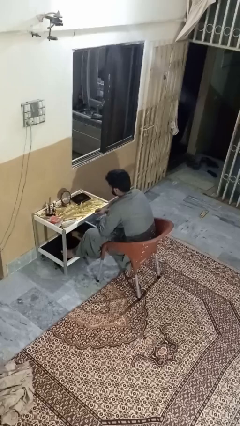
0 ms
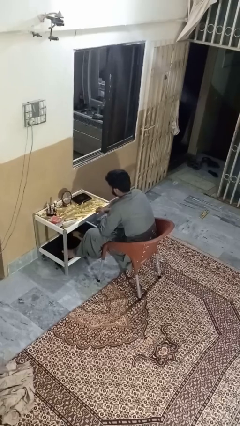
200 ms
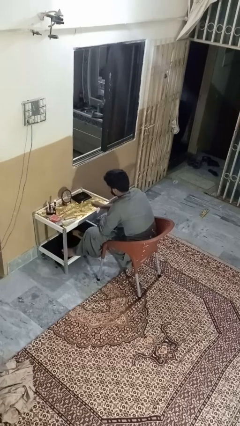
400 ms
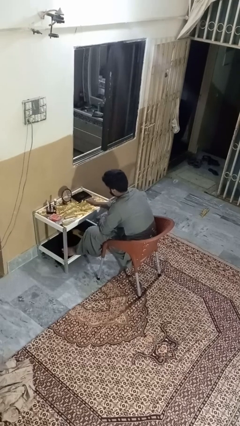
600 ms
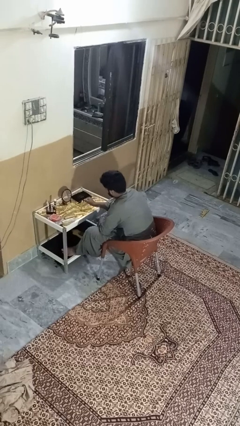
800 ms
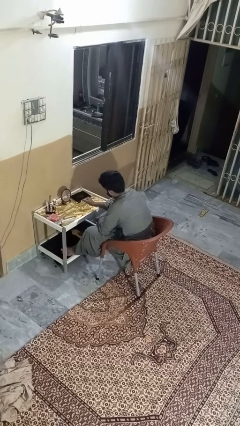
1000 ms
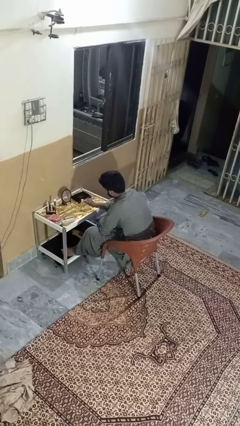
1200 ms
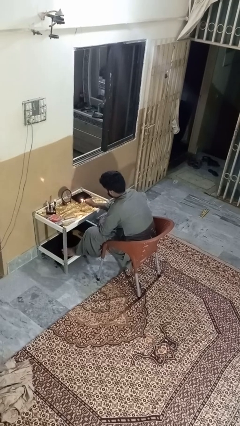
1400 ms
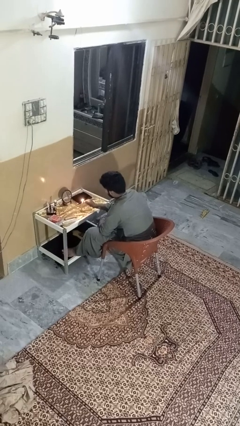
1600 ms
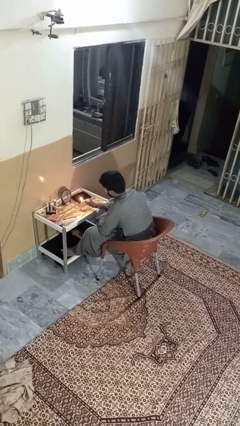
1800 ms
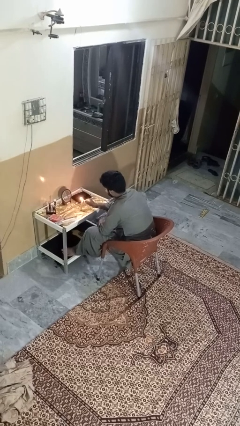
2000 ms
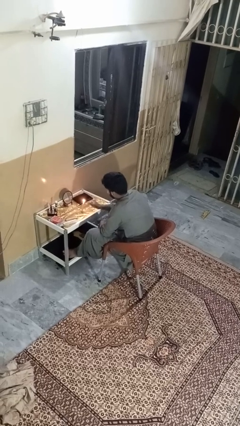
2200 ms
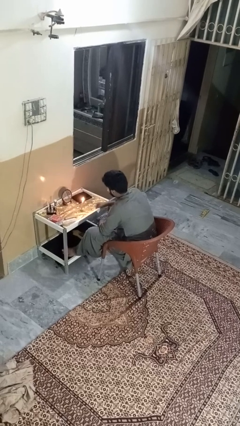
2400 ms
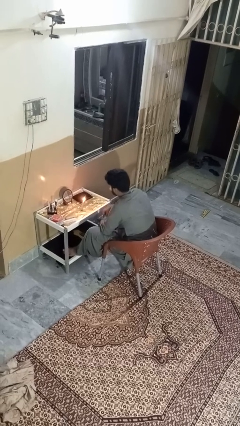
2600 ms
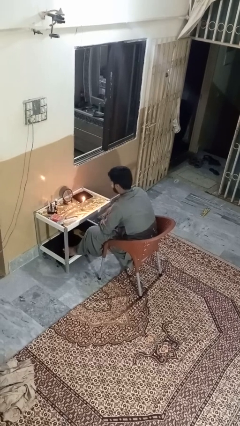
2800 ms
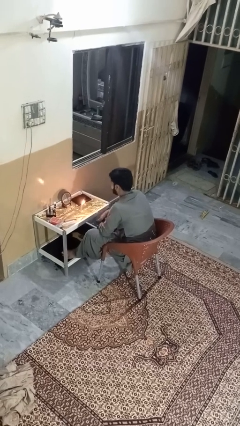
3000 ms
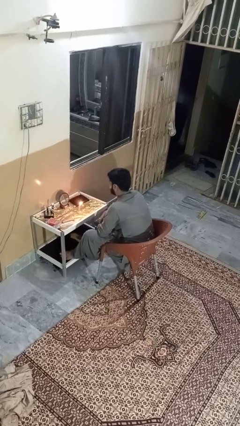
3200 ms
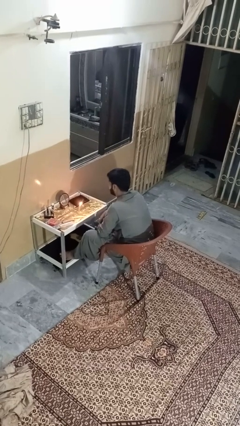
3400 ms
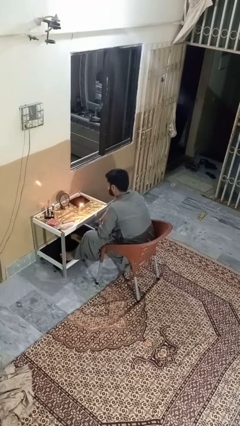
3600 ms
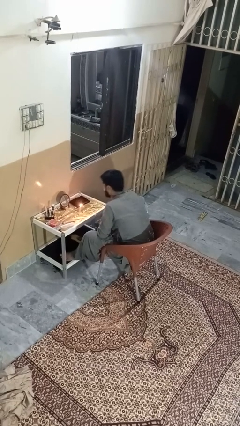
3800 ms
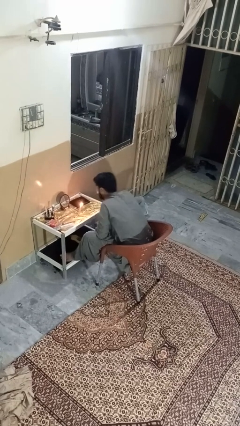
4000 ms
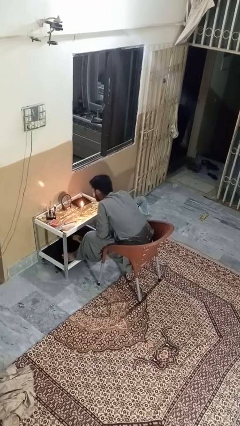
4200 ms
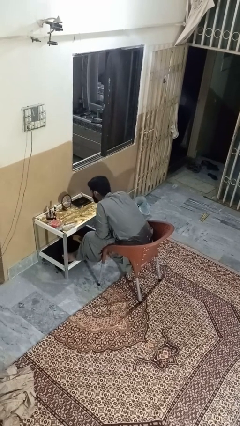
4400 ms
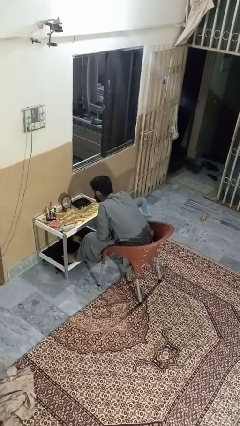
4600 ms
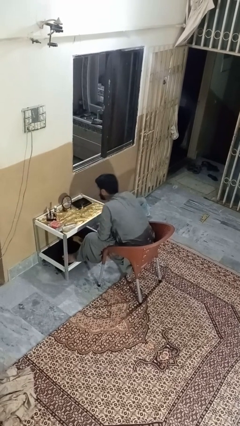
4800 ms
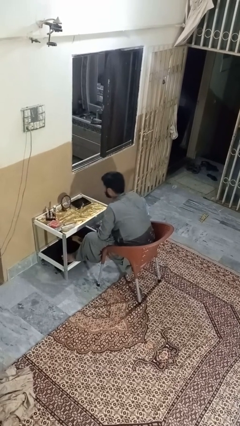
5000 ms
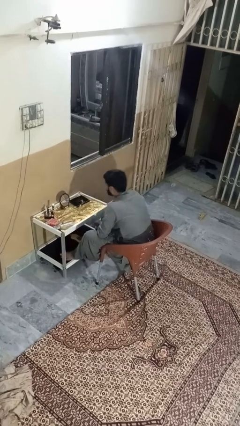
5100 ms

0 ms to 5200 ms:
person lights candle

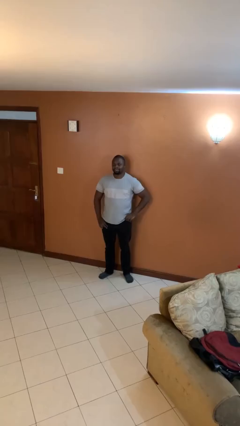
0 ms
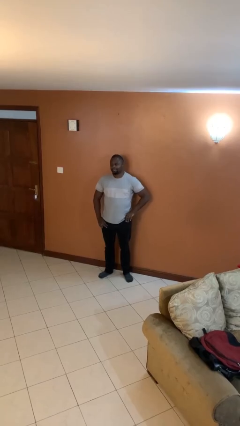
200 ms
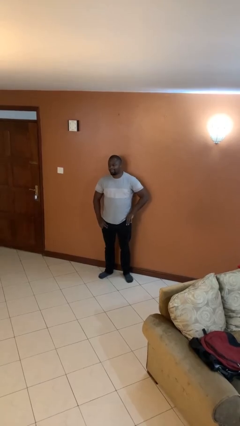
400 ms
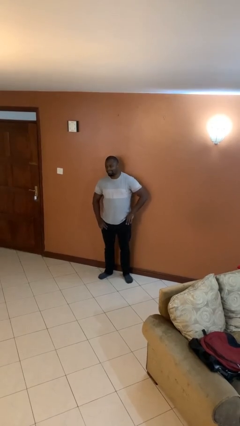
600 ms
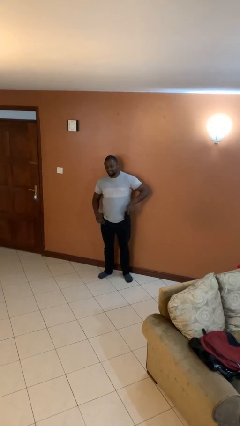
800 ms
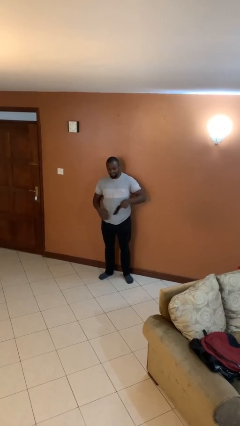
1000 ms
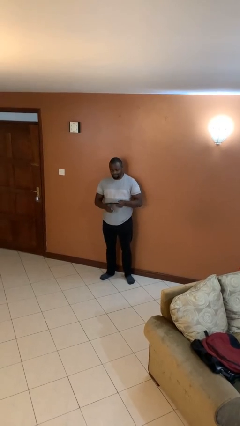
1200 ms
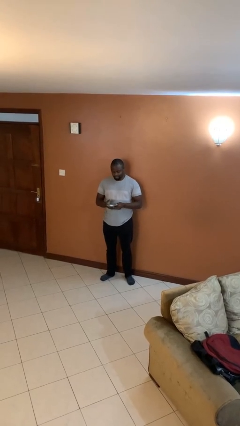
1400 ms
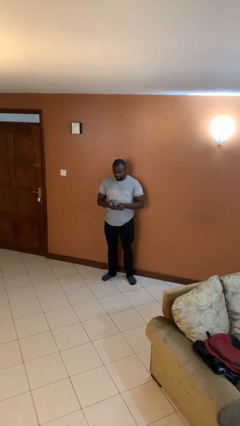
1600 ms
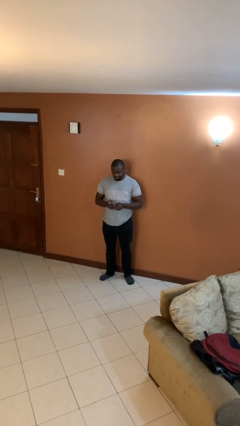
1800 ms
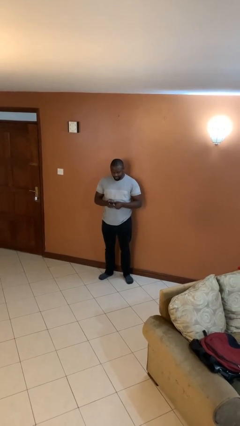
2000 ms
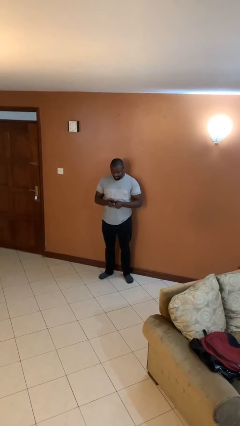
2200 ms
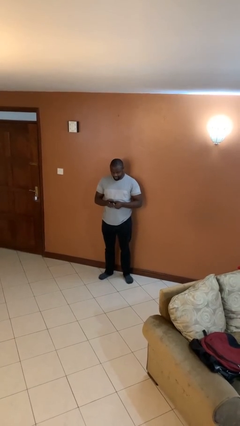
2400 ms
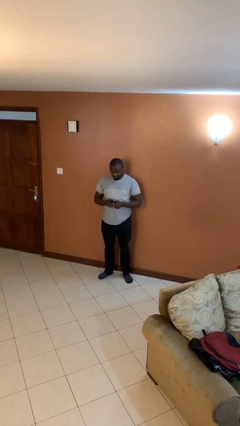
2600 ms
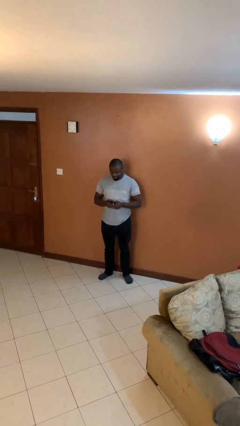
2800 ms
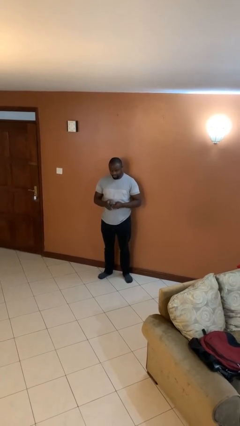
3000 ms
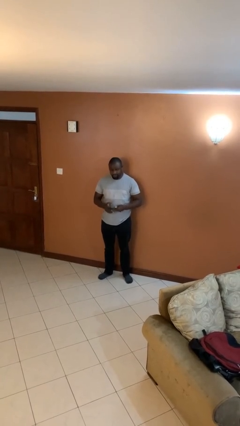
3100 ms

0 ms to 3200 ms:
person takes phone from pocket

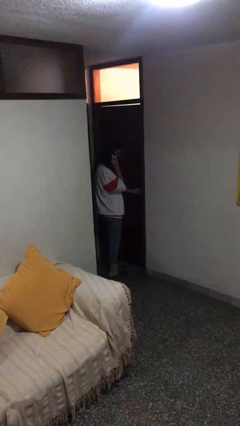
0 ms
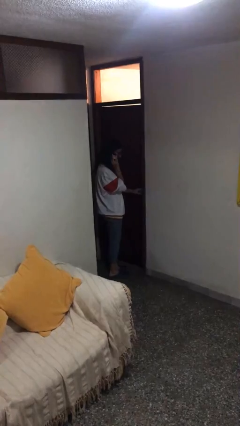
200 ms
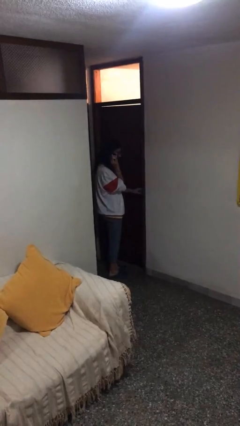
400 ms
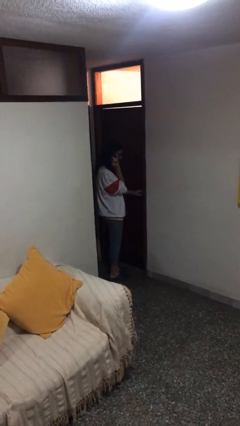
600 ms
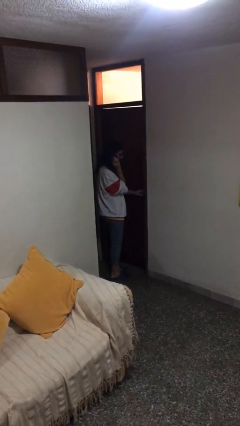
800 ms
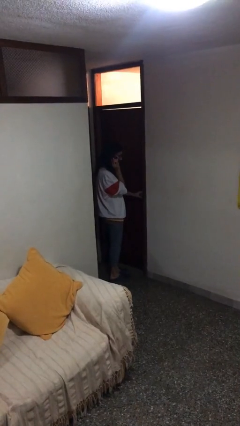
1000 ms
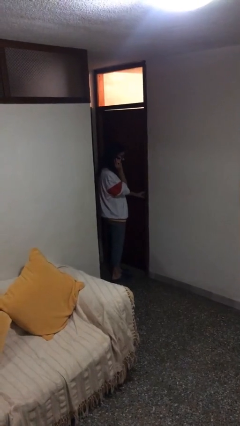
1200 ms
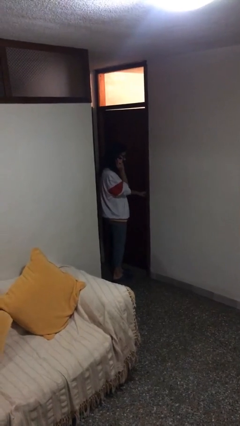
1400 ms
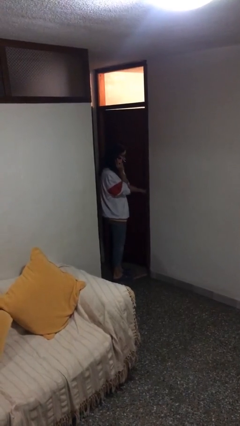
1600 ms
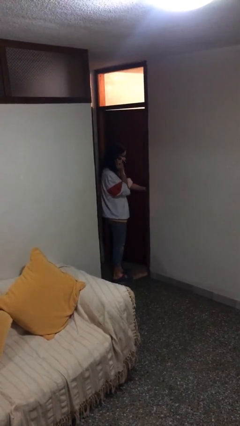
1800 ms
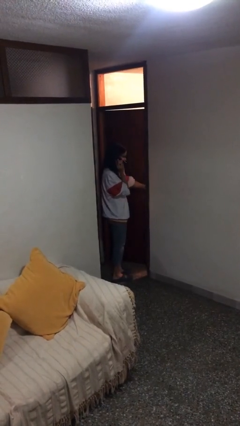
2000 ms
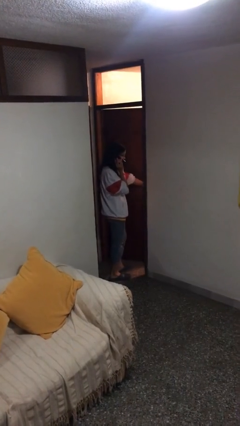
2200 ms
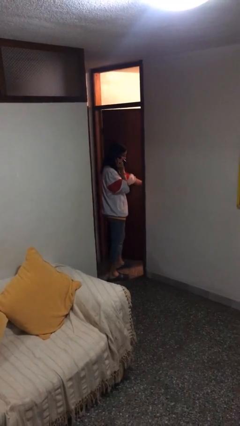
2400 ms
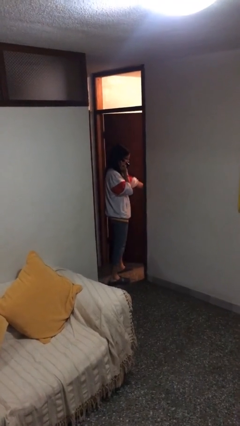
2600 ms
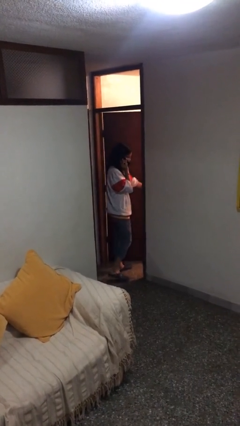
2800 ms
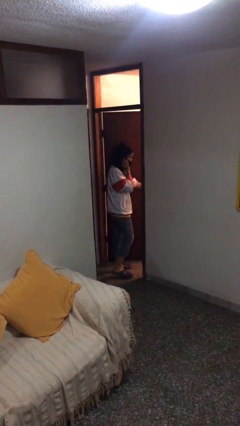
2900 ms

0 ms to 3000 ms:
person opens facility door

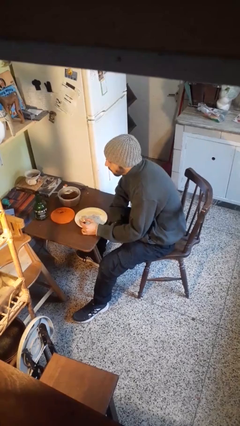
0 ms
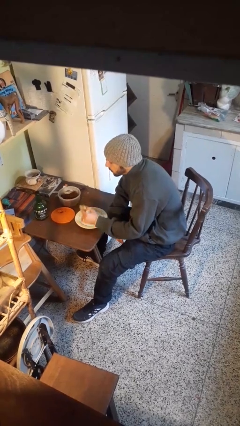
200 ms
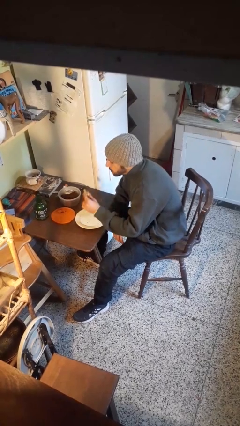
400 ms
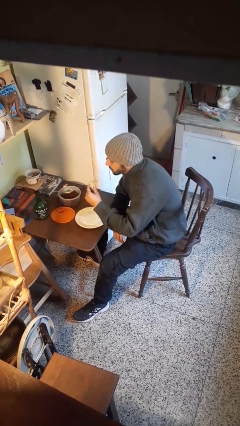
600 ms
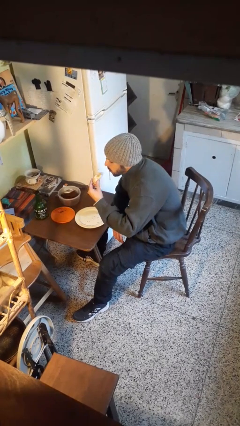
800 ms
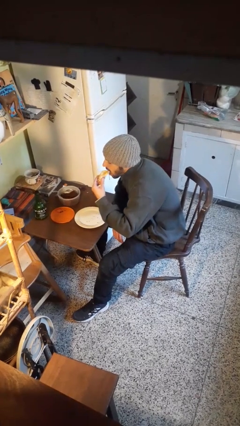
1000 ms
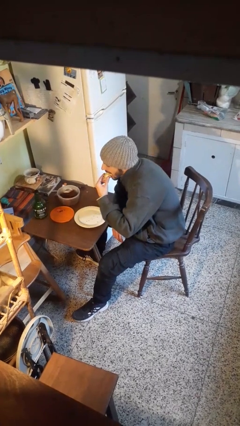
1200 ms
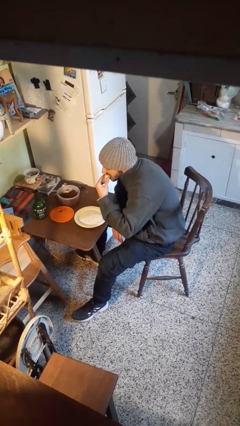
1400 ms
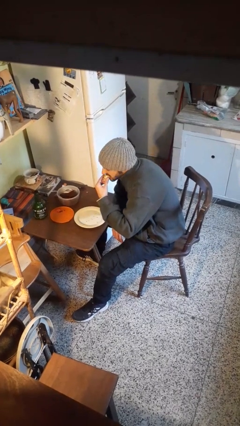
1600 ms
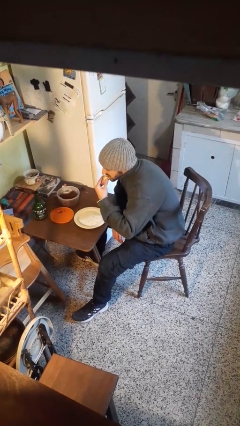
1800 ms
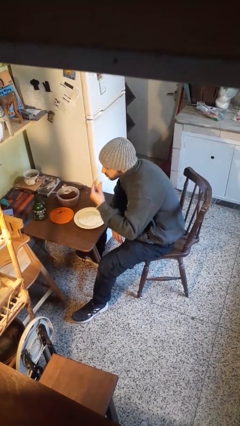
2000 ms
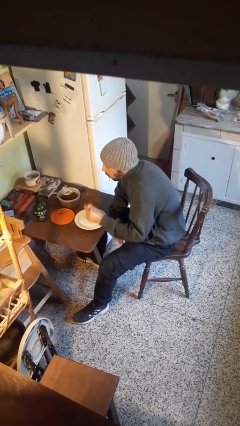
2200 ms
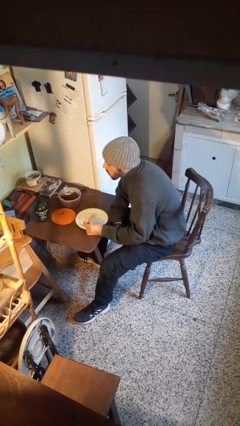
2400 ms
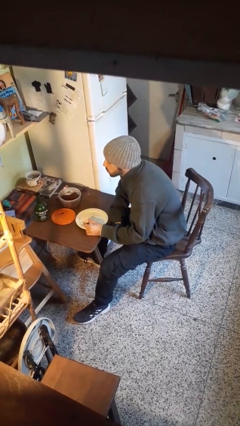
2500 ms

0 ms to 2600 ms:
person eats with hands

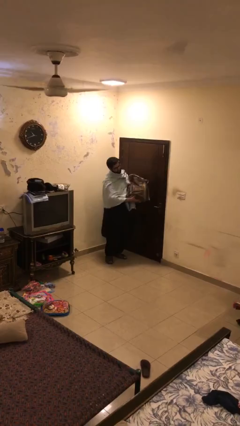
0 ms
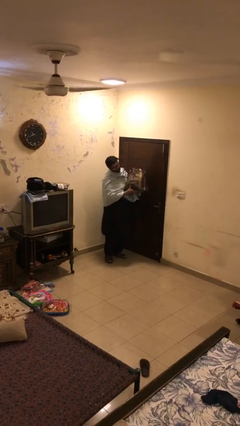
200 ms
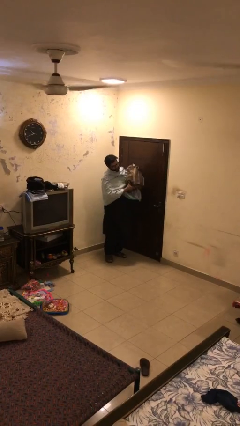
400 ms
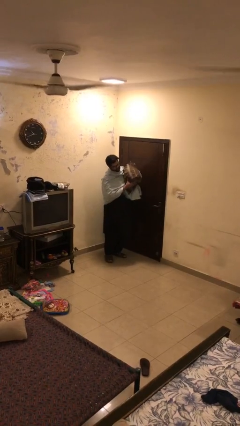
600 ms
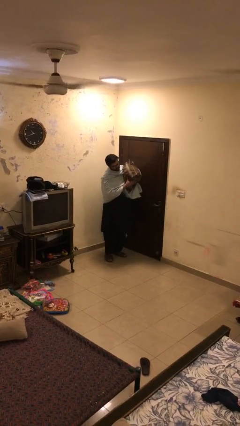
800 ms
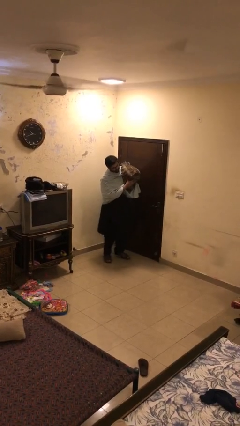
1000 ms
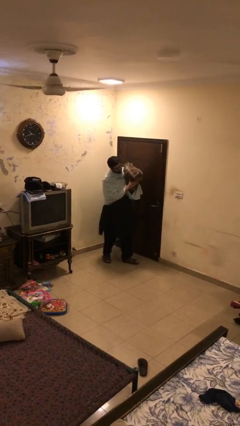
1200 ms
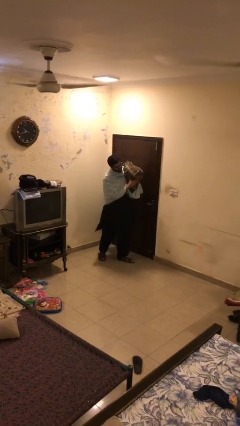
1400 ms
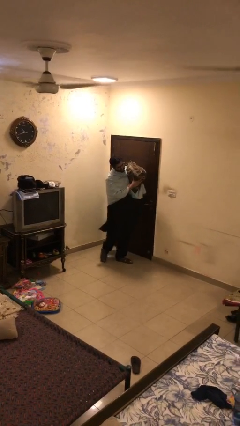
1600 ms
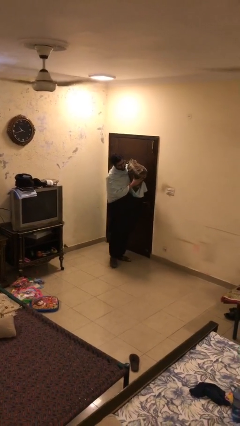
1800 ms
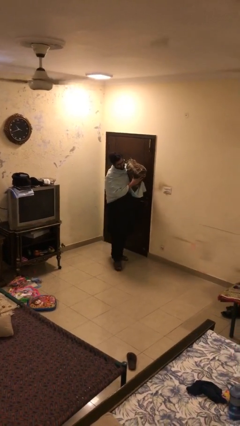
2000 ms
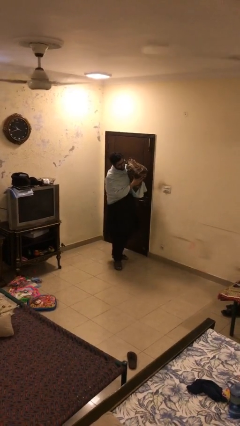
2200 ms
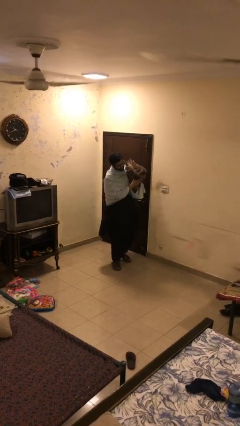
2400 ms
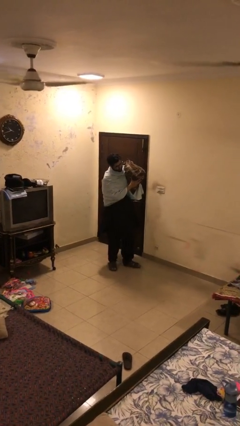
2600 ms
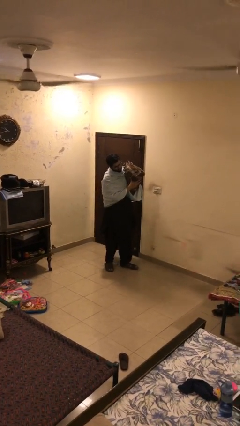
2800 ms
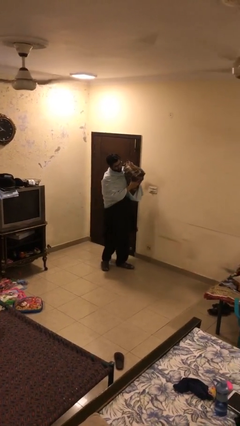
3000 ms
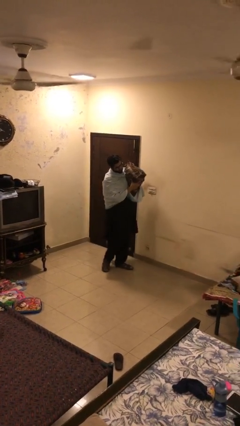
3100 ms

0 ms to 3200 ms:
person carries heavy object

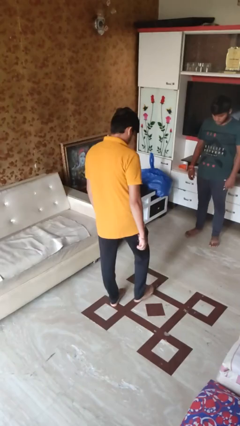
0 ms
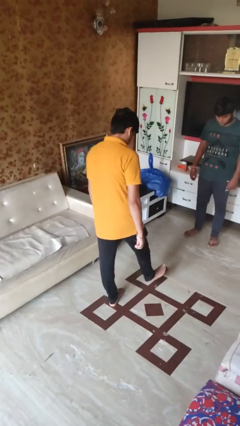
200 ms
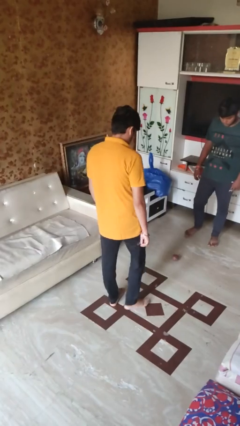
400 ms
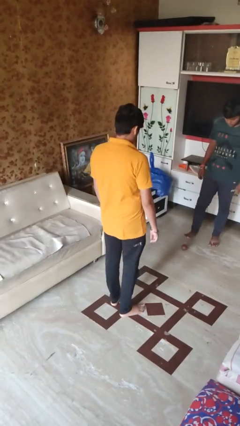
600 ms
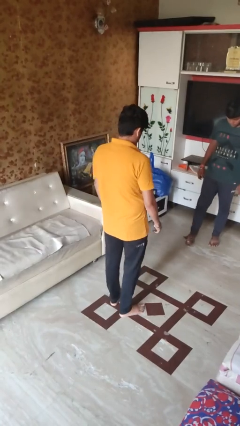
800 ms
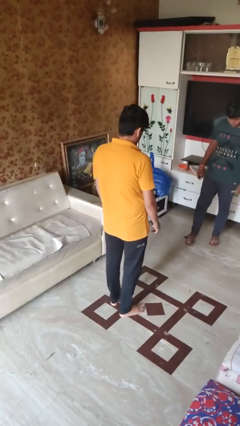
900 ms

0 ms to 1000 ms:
person kicks object to person
